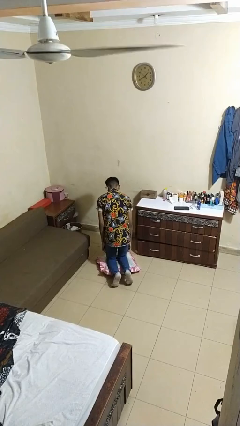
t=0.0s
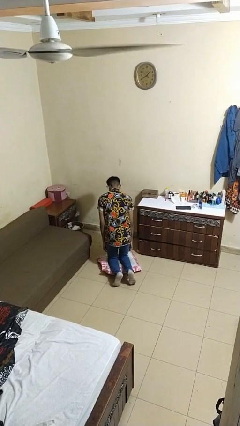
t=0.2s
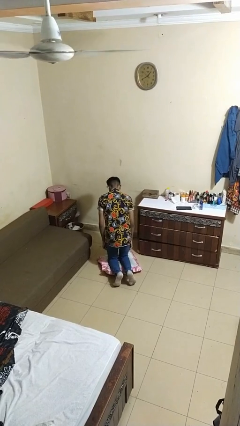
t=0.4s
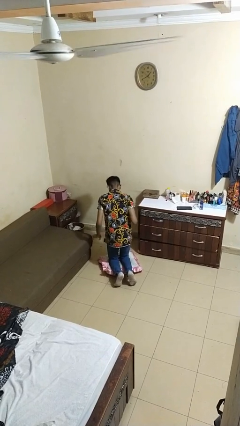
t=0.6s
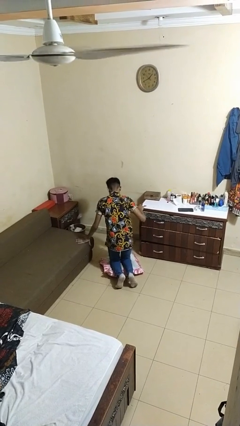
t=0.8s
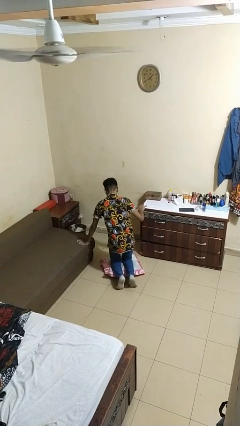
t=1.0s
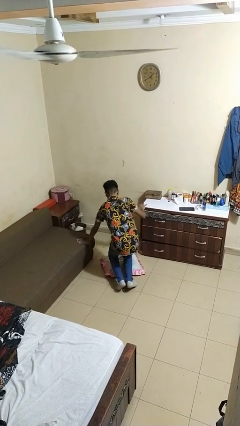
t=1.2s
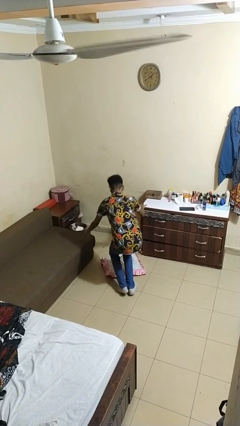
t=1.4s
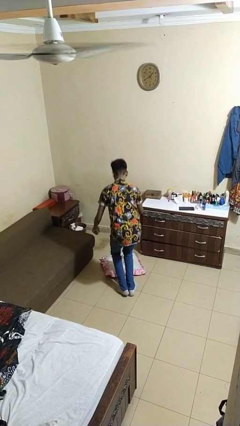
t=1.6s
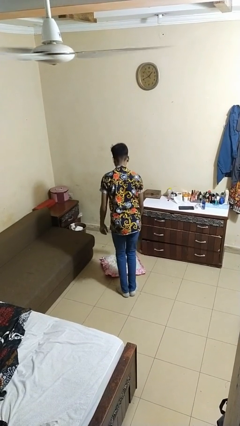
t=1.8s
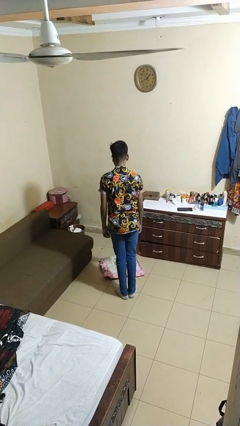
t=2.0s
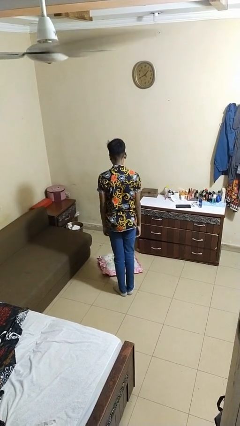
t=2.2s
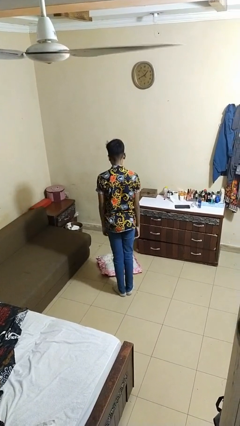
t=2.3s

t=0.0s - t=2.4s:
person stands up from floor

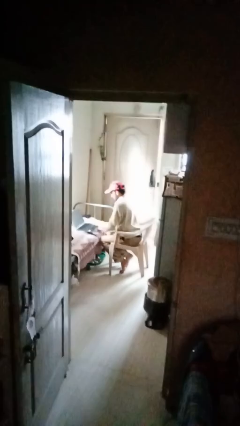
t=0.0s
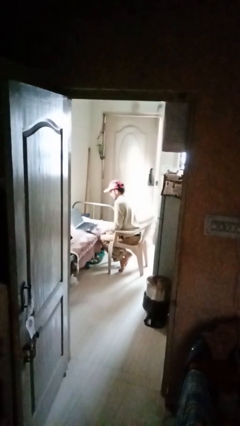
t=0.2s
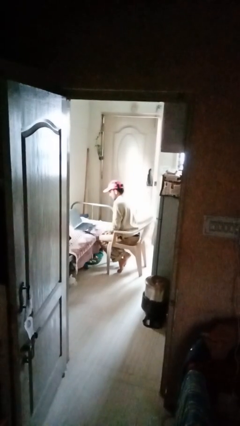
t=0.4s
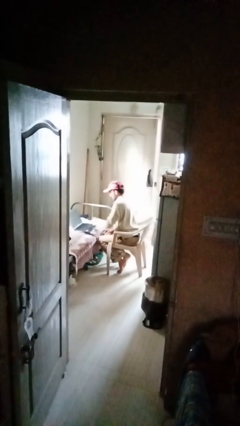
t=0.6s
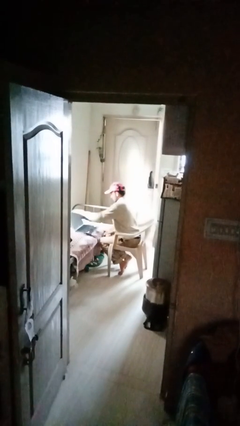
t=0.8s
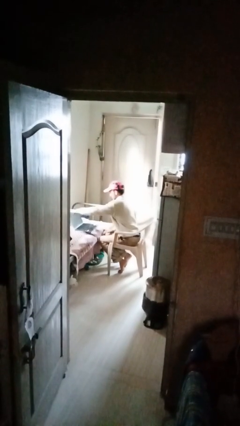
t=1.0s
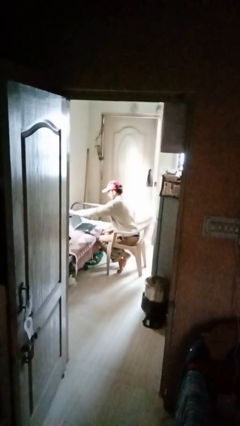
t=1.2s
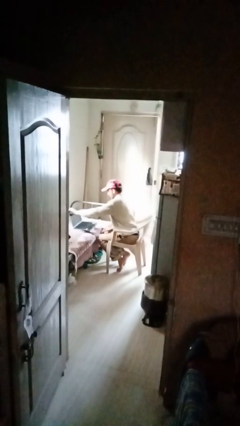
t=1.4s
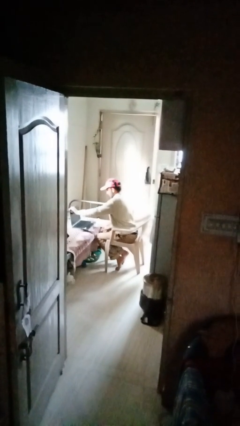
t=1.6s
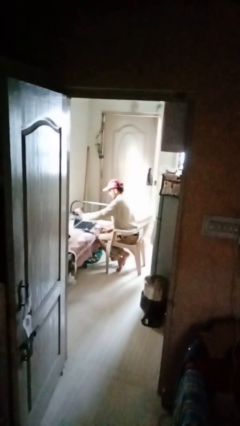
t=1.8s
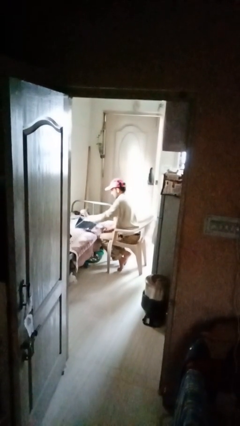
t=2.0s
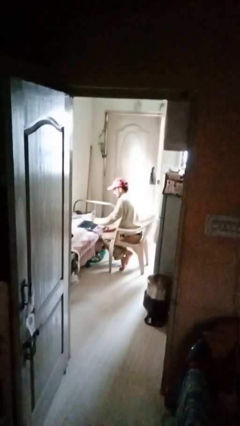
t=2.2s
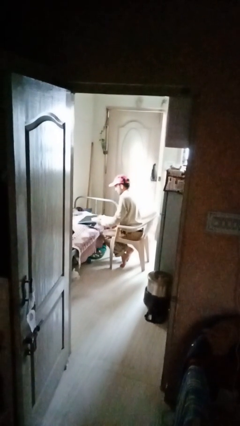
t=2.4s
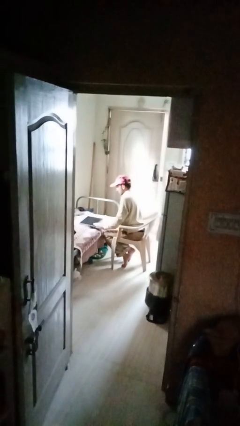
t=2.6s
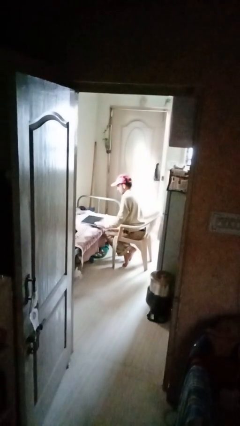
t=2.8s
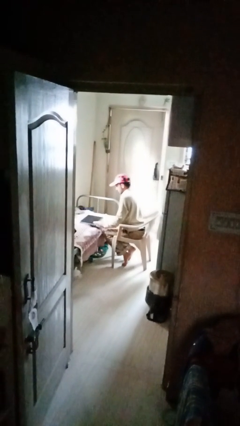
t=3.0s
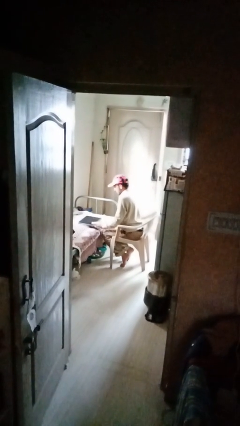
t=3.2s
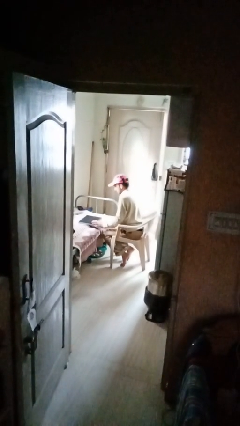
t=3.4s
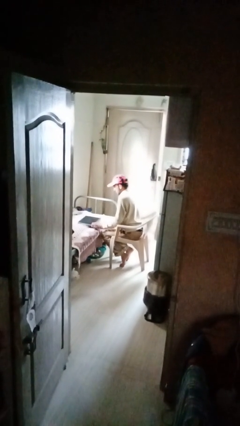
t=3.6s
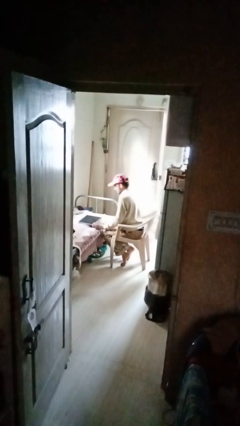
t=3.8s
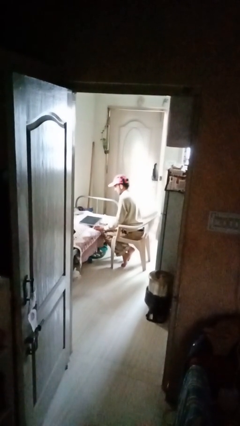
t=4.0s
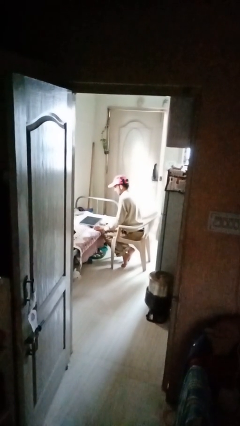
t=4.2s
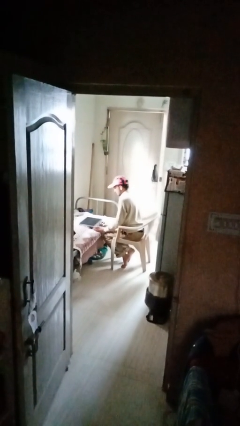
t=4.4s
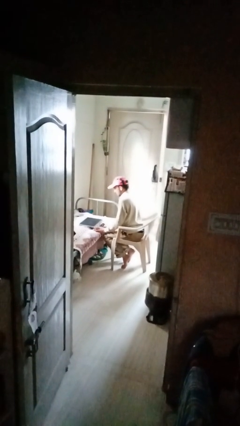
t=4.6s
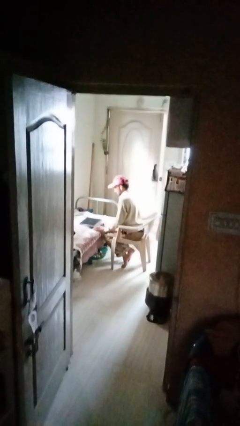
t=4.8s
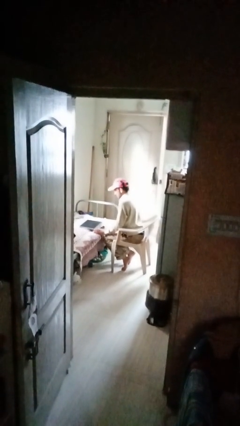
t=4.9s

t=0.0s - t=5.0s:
person closes laptop

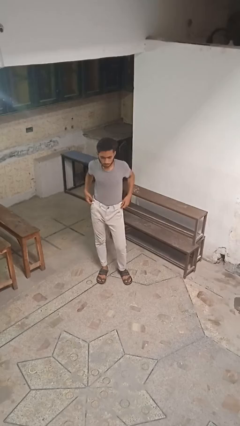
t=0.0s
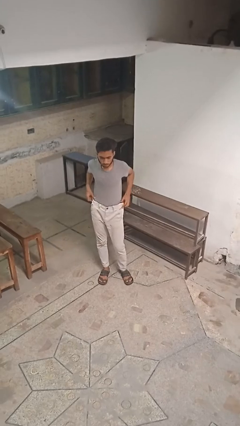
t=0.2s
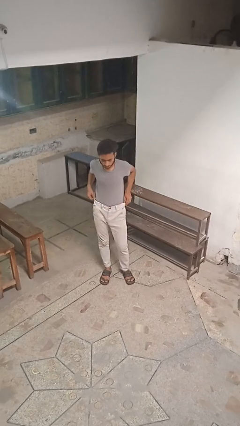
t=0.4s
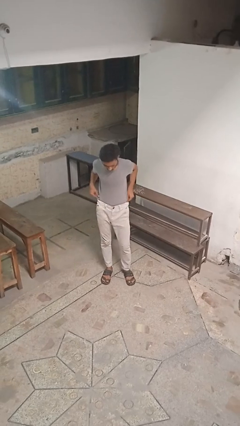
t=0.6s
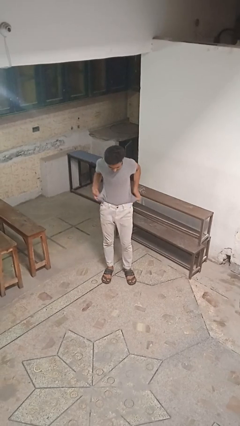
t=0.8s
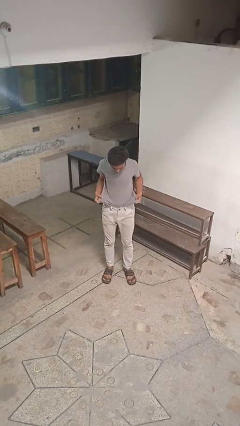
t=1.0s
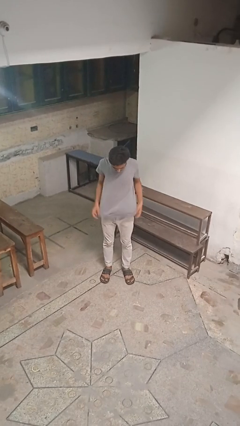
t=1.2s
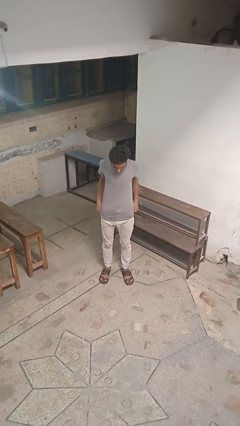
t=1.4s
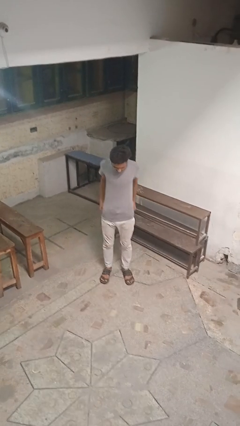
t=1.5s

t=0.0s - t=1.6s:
person untucks shirt

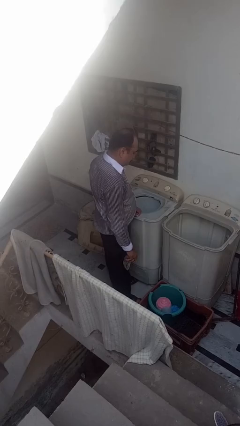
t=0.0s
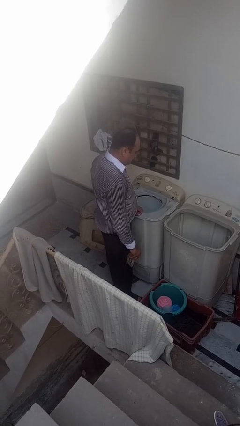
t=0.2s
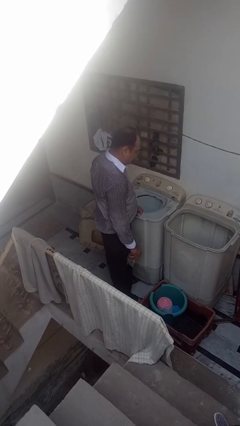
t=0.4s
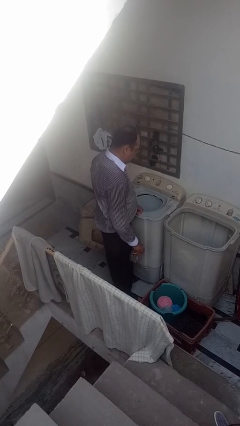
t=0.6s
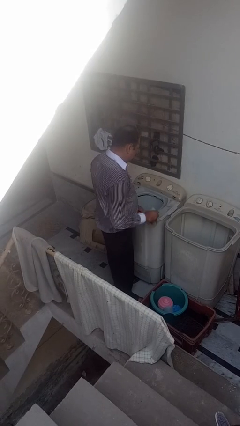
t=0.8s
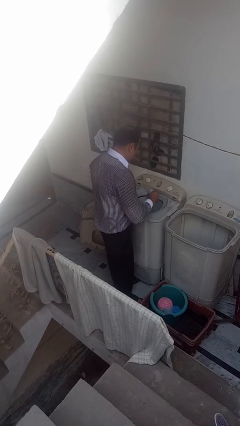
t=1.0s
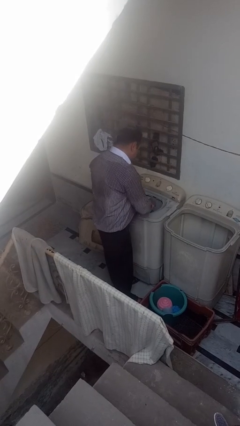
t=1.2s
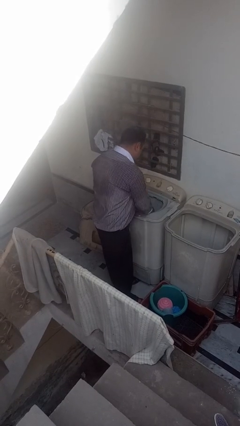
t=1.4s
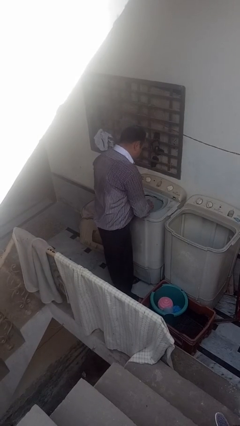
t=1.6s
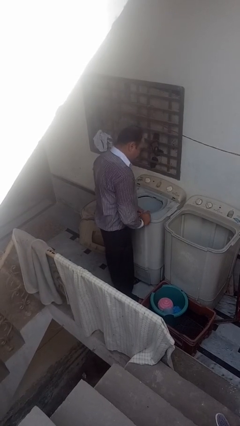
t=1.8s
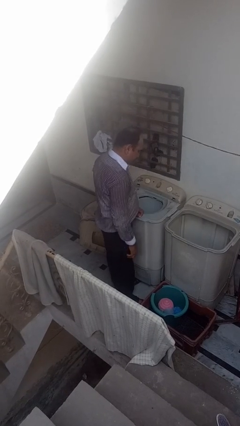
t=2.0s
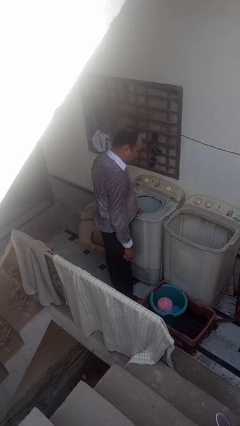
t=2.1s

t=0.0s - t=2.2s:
person loads dryer

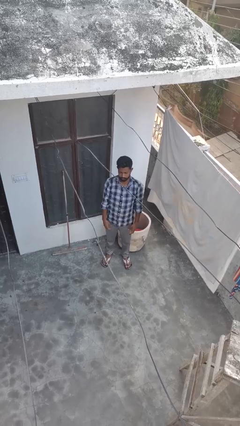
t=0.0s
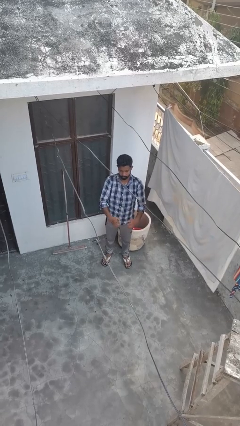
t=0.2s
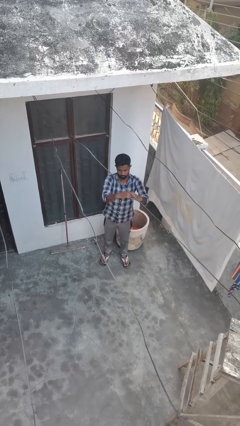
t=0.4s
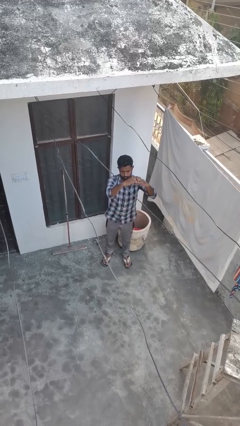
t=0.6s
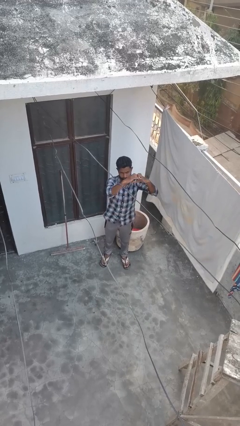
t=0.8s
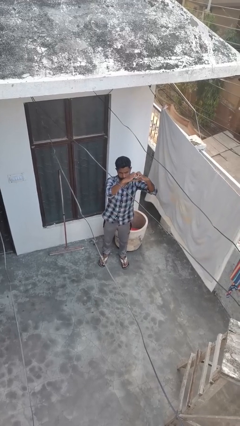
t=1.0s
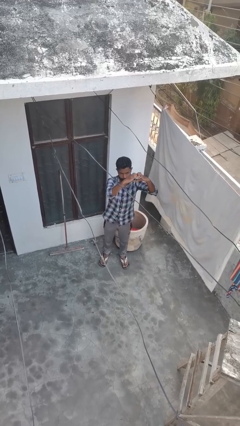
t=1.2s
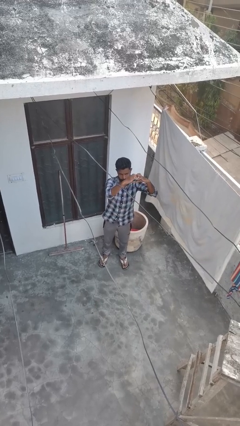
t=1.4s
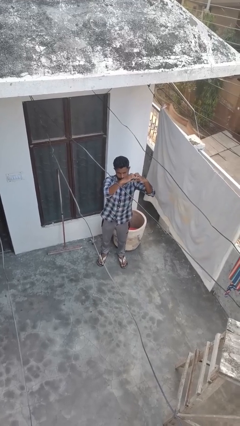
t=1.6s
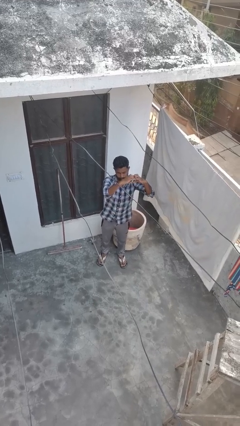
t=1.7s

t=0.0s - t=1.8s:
person gestures heart

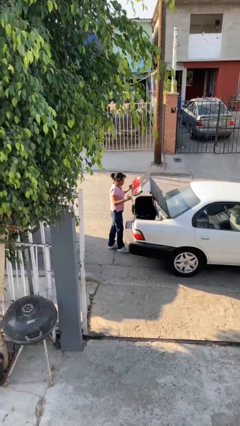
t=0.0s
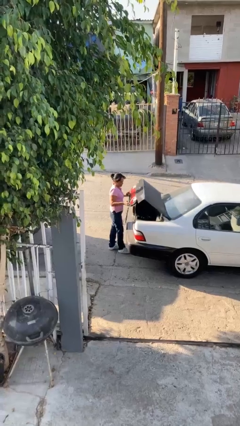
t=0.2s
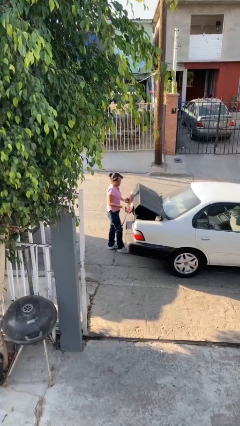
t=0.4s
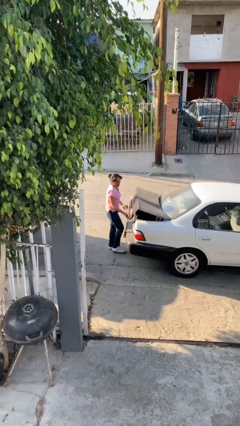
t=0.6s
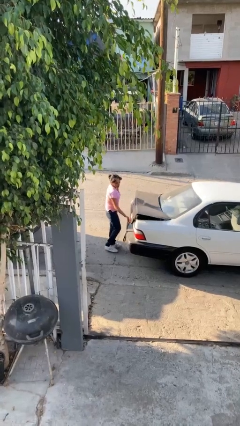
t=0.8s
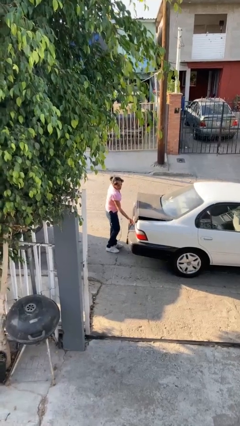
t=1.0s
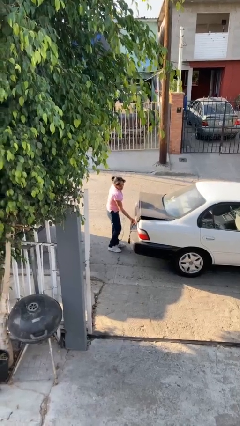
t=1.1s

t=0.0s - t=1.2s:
person closes car trunk

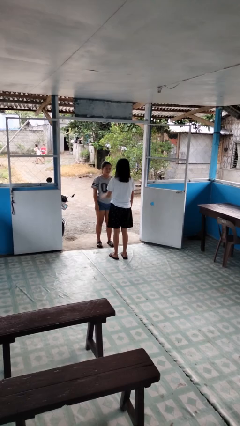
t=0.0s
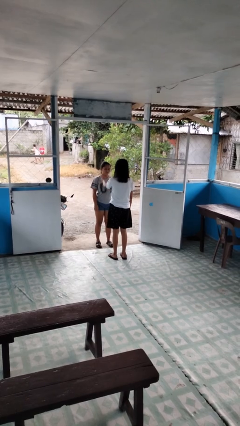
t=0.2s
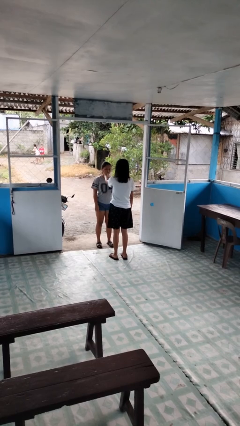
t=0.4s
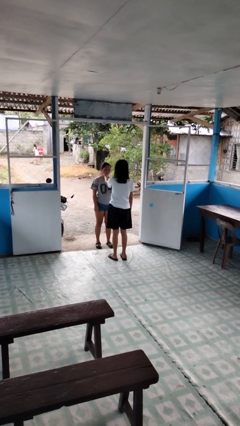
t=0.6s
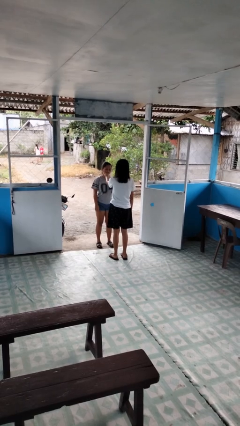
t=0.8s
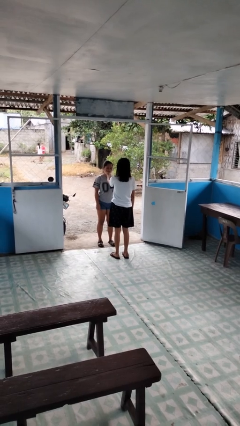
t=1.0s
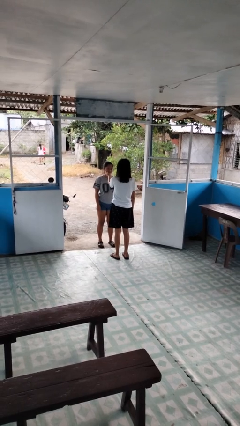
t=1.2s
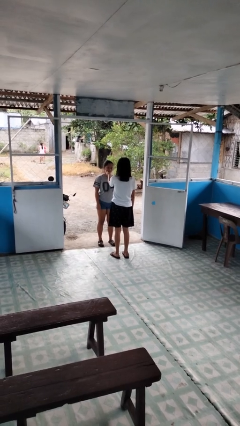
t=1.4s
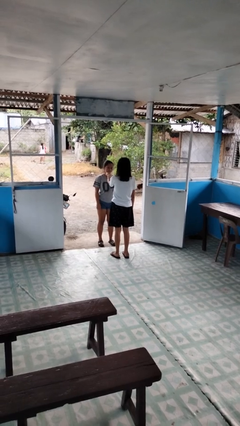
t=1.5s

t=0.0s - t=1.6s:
person touches face of person

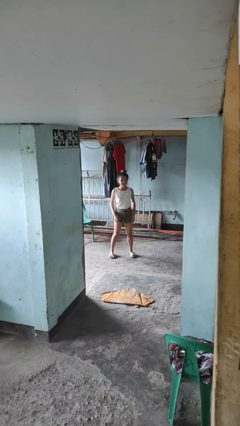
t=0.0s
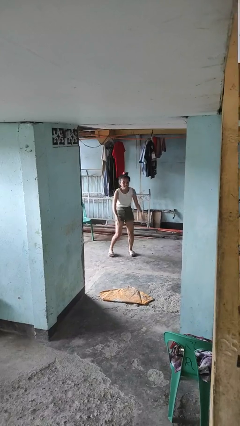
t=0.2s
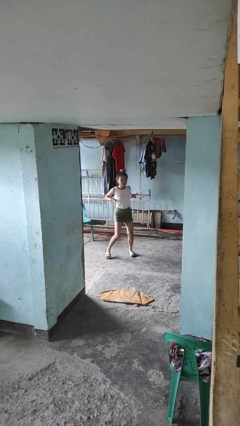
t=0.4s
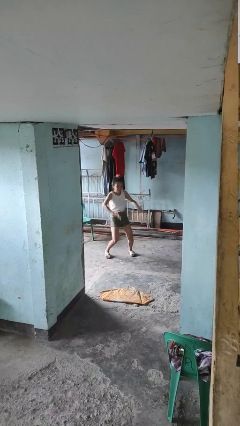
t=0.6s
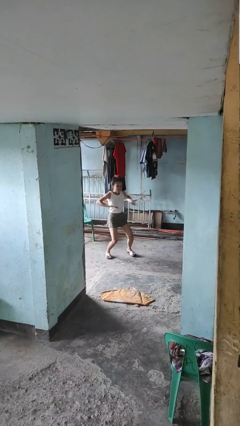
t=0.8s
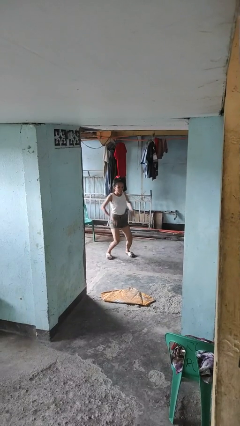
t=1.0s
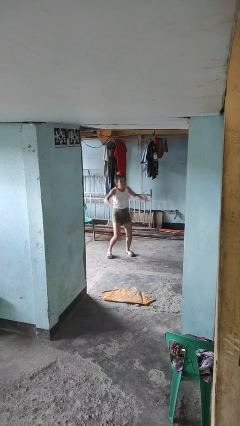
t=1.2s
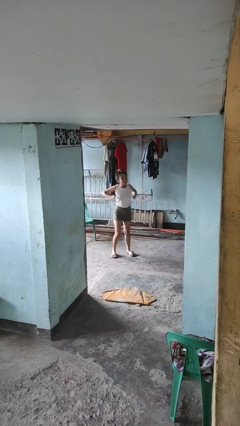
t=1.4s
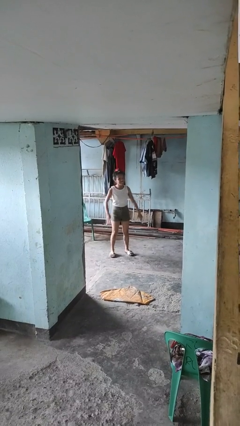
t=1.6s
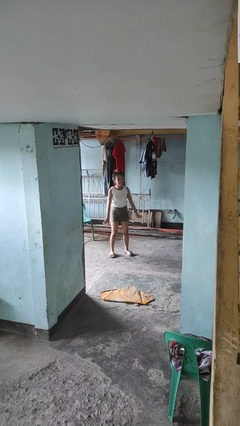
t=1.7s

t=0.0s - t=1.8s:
person dances in place
